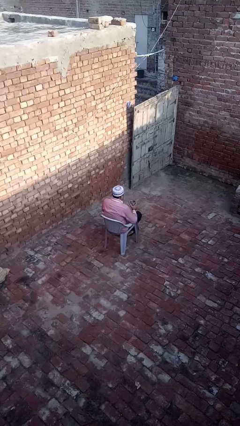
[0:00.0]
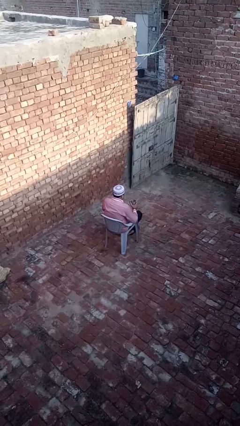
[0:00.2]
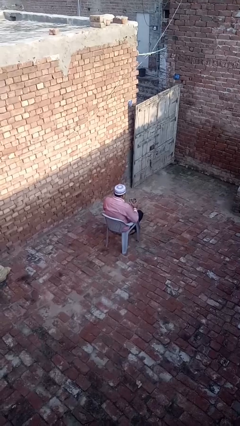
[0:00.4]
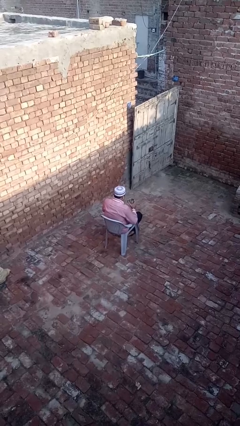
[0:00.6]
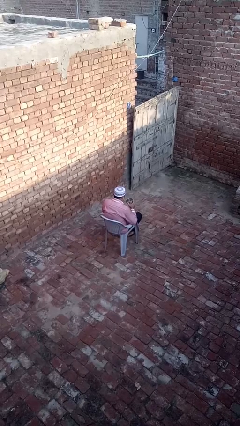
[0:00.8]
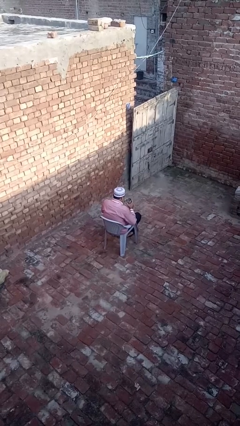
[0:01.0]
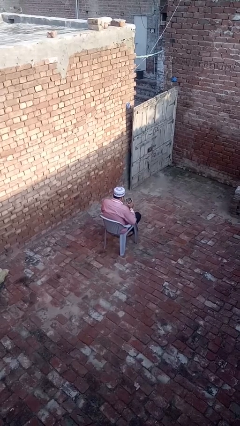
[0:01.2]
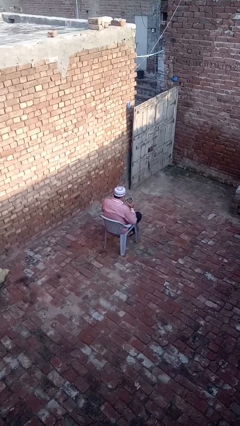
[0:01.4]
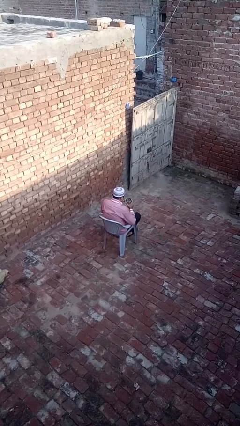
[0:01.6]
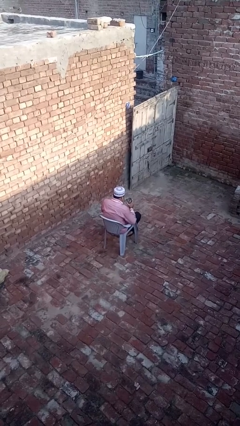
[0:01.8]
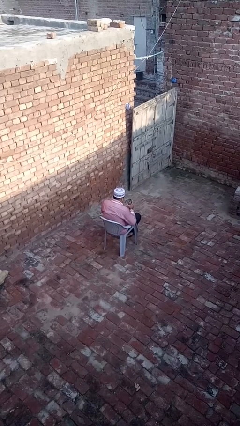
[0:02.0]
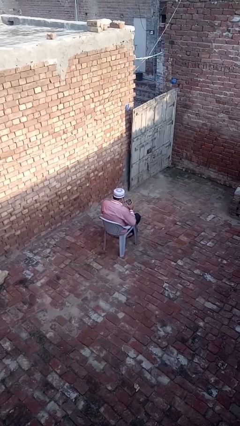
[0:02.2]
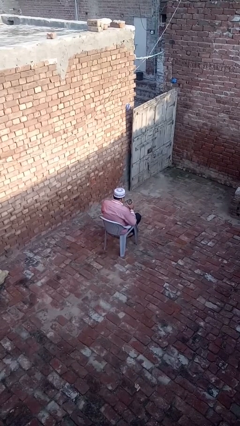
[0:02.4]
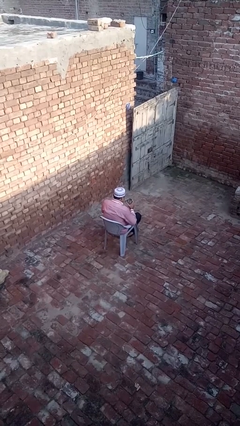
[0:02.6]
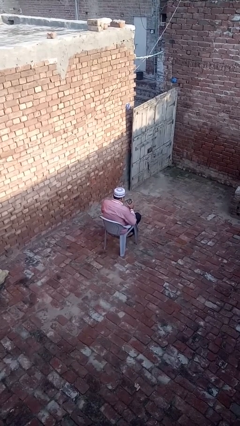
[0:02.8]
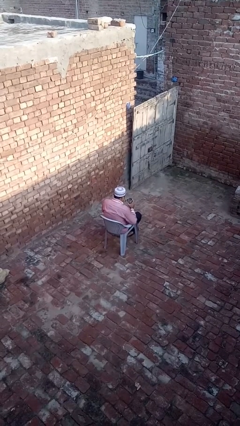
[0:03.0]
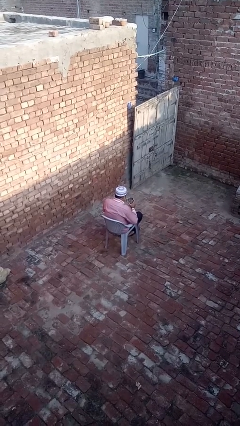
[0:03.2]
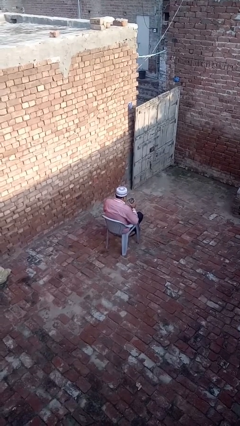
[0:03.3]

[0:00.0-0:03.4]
person drinks from straw

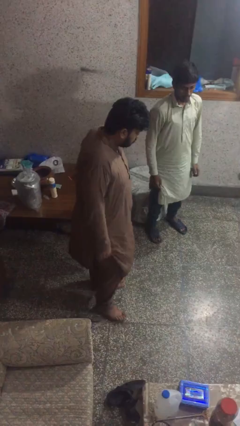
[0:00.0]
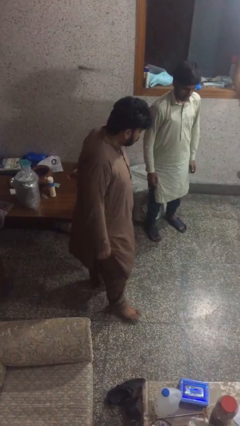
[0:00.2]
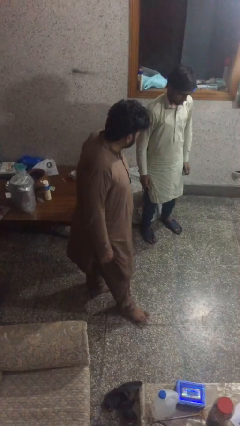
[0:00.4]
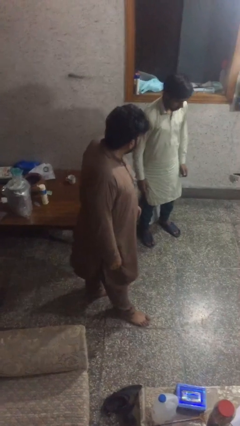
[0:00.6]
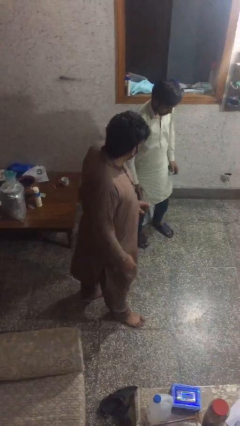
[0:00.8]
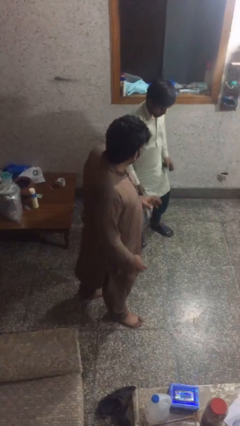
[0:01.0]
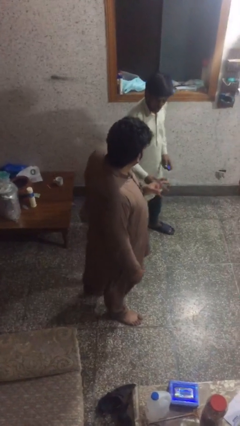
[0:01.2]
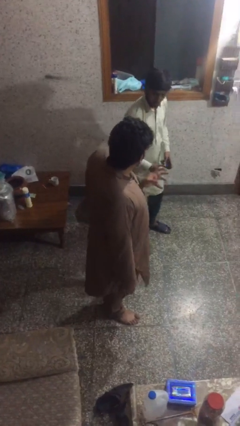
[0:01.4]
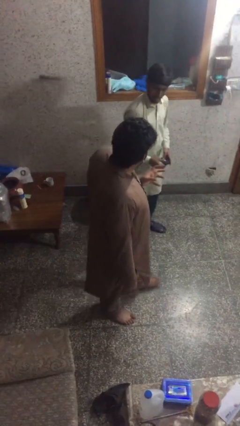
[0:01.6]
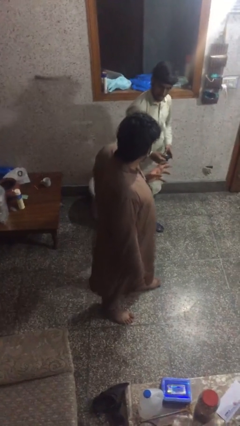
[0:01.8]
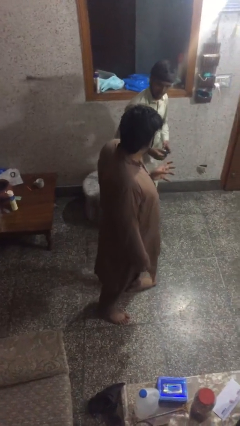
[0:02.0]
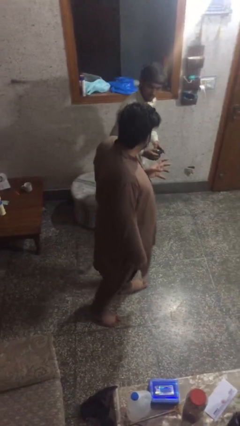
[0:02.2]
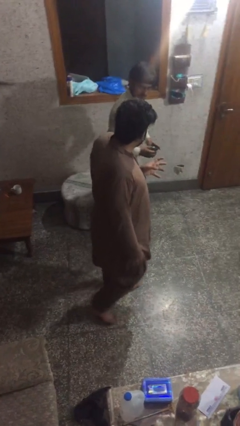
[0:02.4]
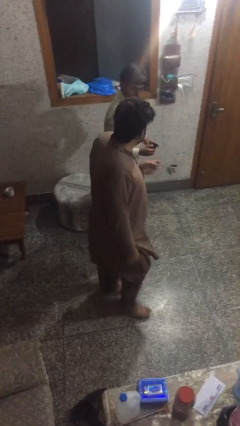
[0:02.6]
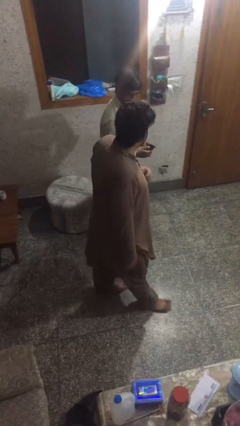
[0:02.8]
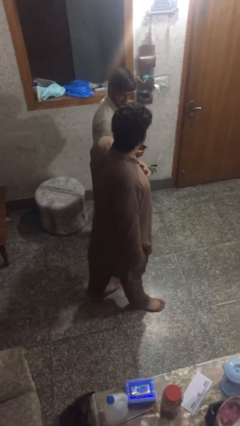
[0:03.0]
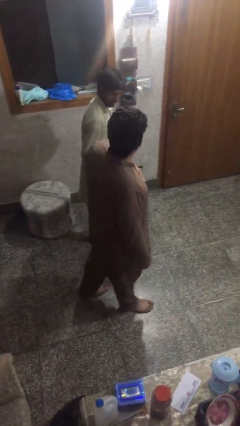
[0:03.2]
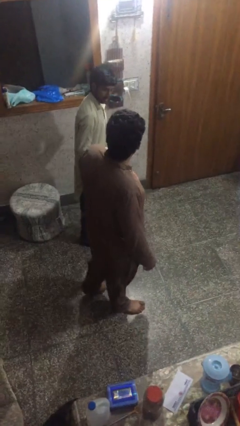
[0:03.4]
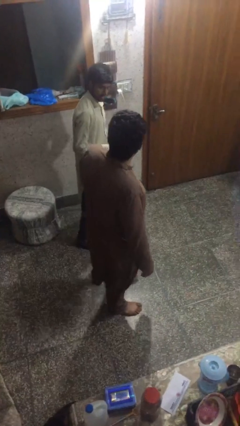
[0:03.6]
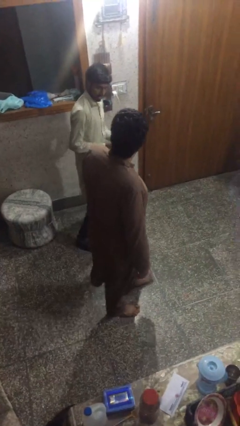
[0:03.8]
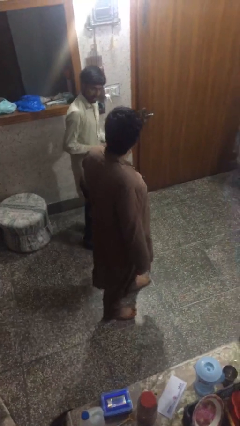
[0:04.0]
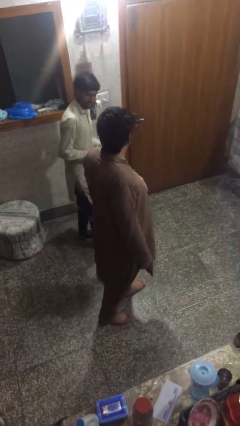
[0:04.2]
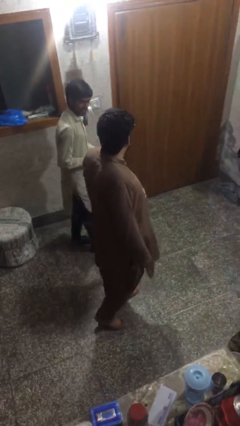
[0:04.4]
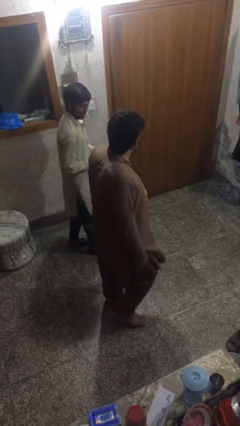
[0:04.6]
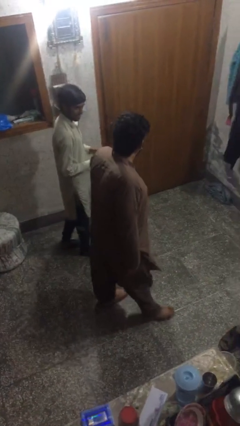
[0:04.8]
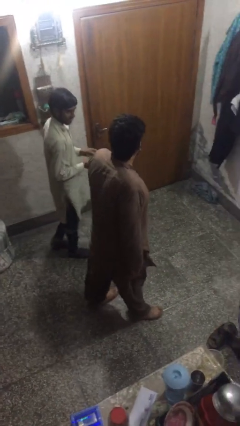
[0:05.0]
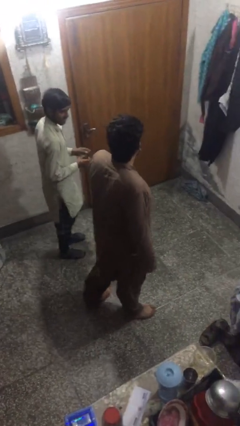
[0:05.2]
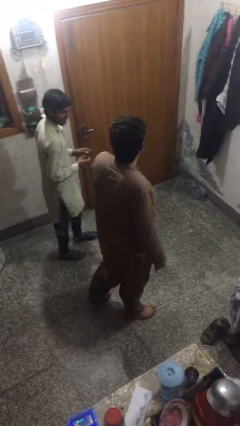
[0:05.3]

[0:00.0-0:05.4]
person talks to person

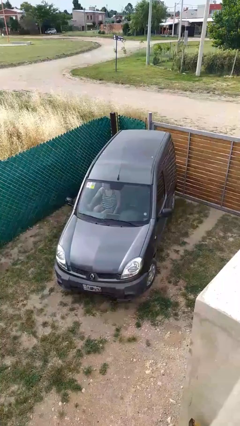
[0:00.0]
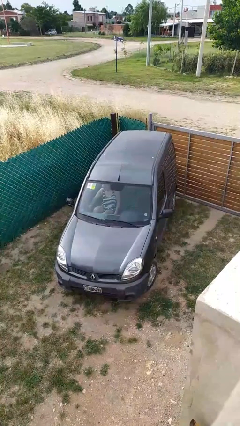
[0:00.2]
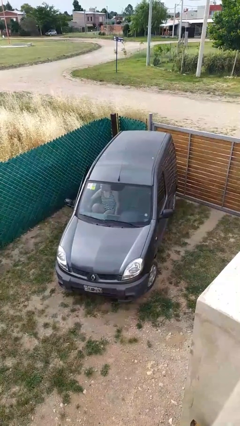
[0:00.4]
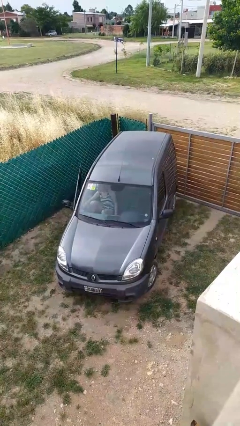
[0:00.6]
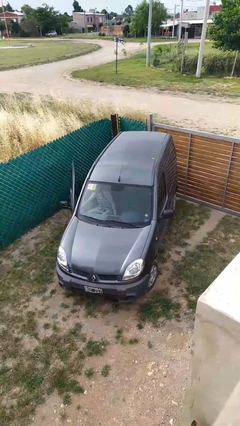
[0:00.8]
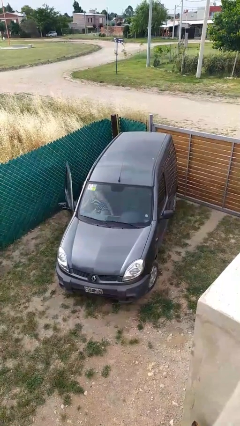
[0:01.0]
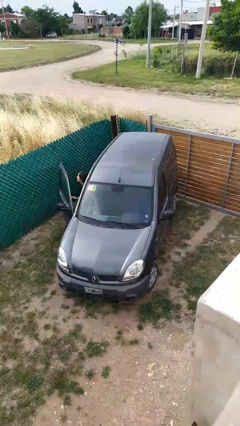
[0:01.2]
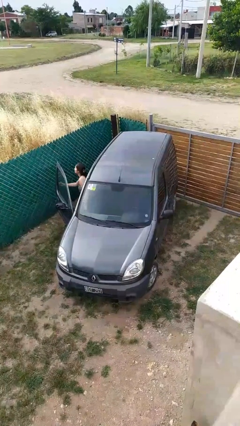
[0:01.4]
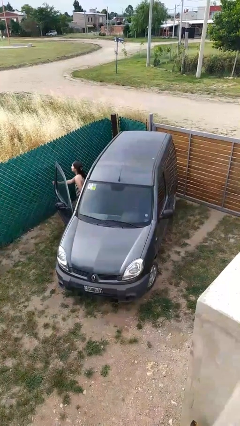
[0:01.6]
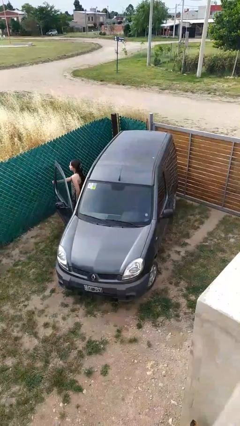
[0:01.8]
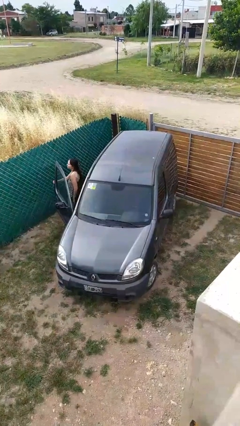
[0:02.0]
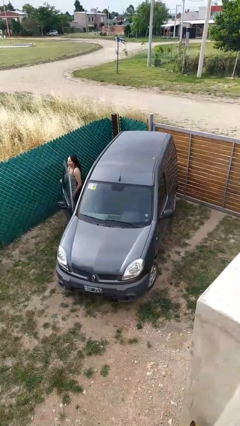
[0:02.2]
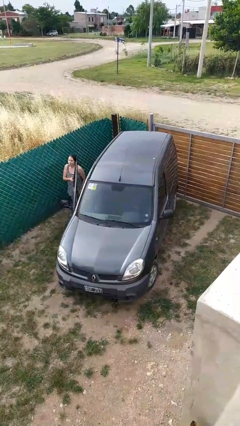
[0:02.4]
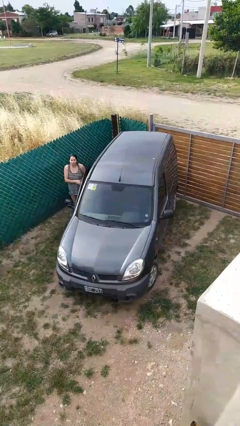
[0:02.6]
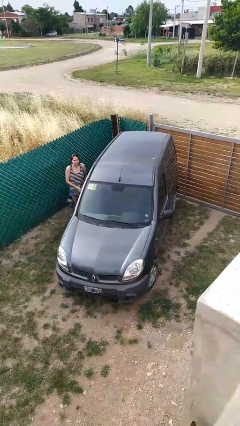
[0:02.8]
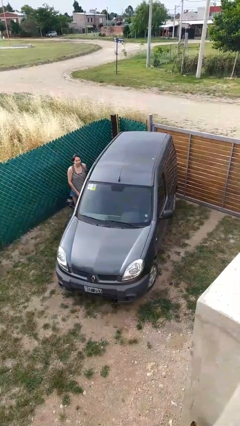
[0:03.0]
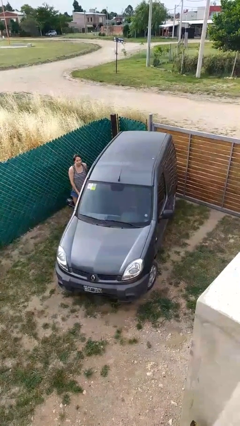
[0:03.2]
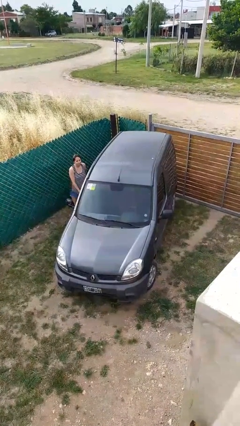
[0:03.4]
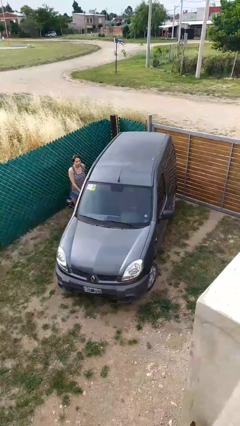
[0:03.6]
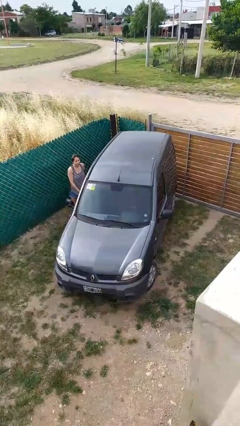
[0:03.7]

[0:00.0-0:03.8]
car drops off person

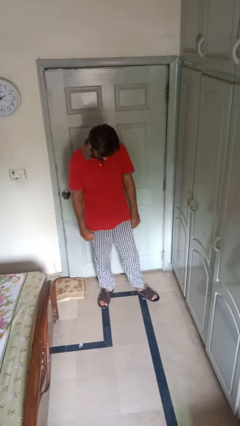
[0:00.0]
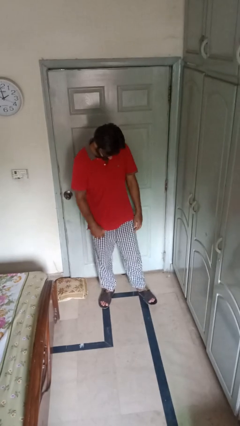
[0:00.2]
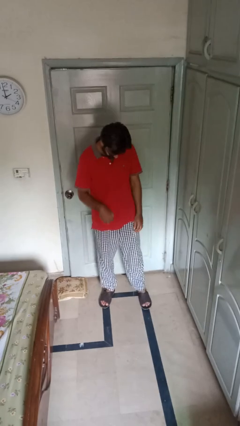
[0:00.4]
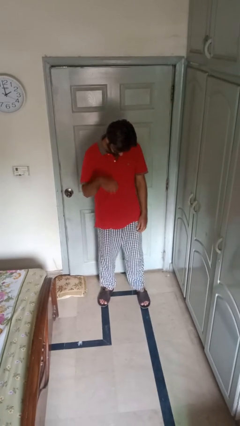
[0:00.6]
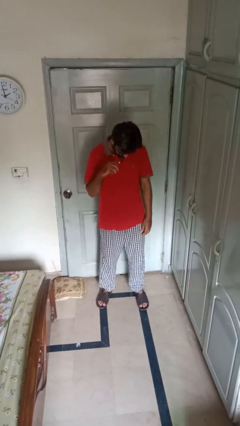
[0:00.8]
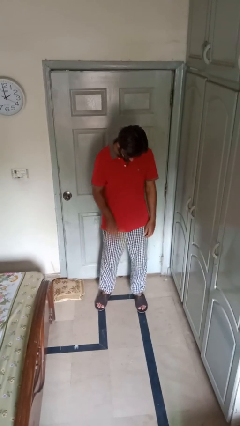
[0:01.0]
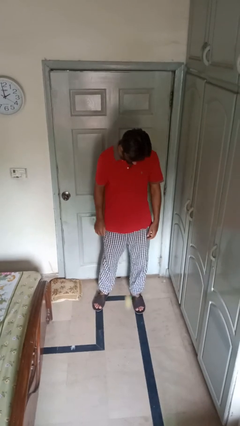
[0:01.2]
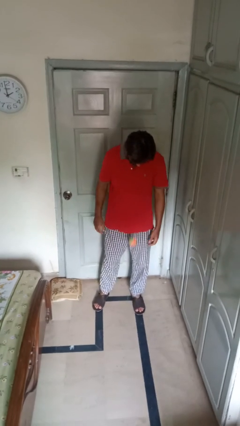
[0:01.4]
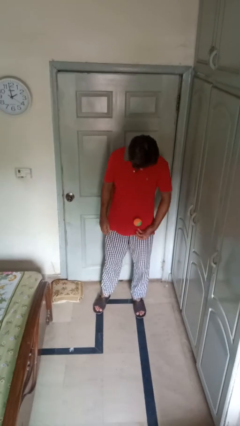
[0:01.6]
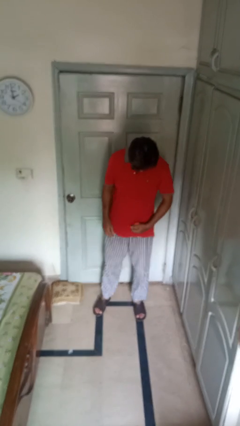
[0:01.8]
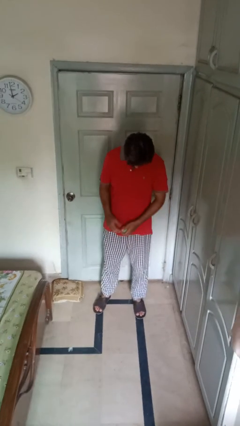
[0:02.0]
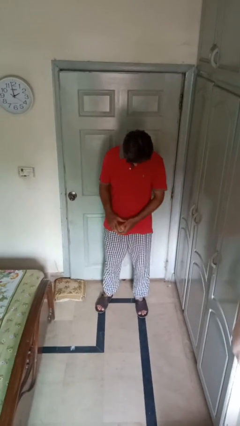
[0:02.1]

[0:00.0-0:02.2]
person bounces ball on floor

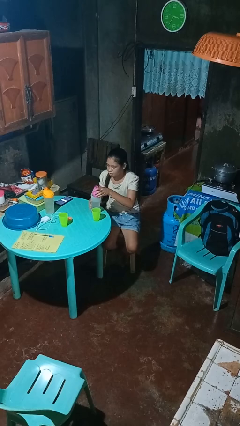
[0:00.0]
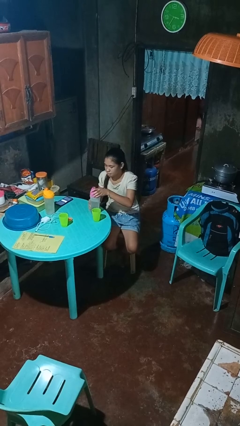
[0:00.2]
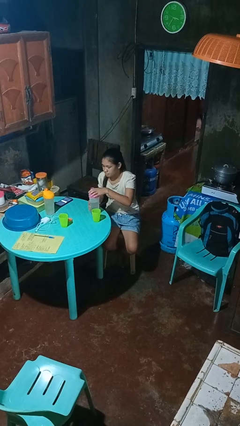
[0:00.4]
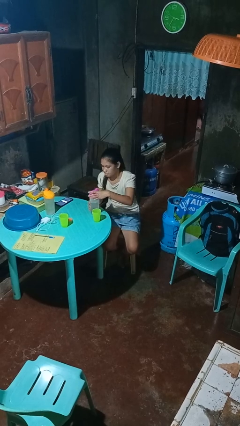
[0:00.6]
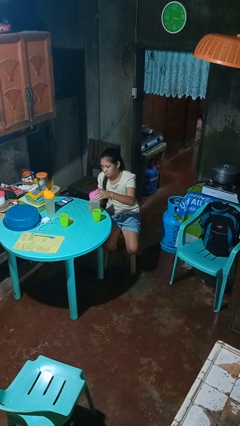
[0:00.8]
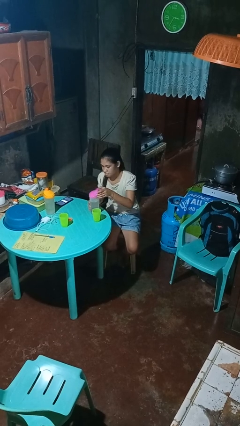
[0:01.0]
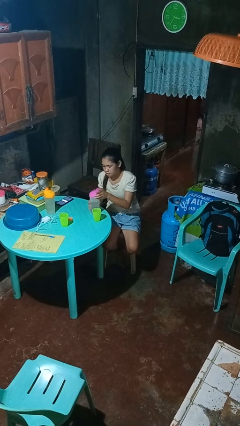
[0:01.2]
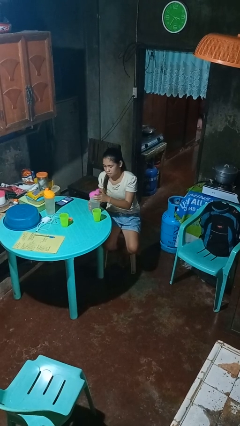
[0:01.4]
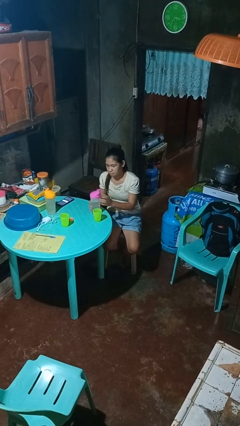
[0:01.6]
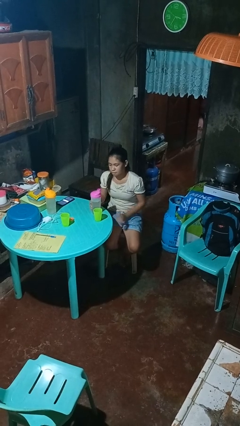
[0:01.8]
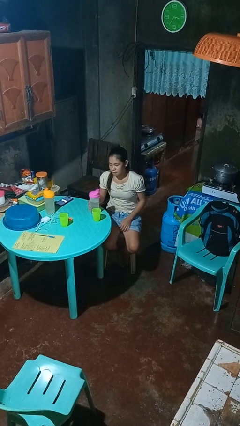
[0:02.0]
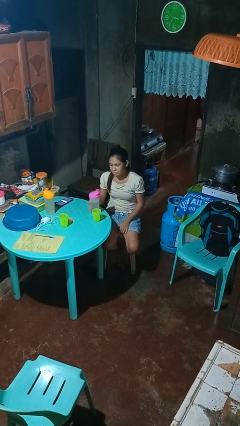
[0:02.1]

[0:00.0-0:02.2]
person screws lid to bottle

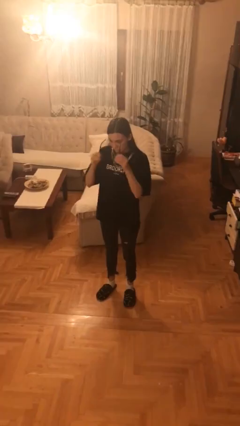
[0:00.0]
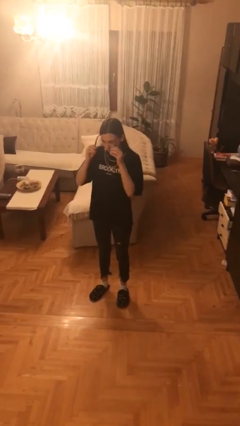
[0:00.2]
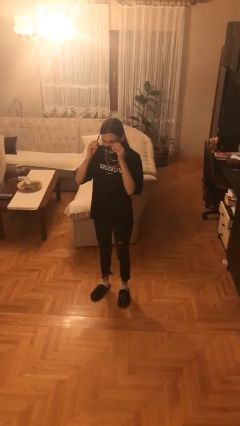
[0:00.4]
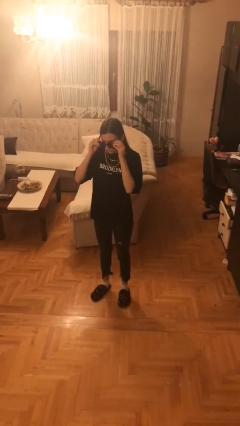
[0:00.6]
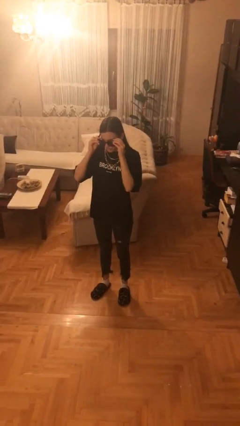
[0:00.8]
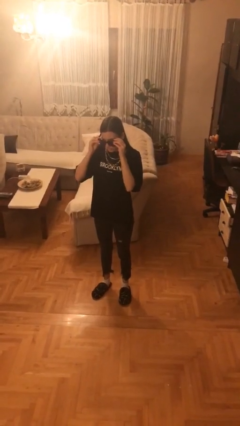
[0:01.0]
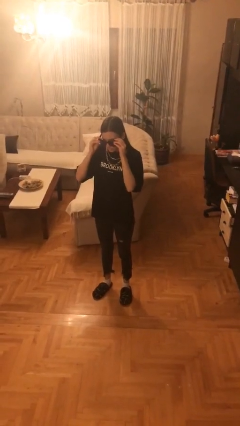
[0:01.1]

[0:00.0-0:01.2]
person puts on sunglasses
